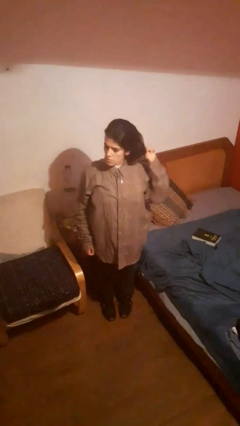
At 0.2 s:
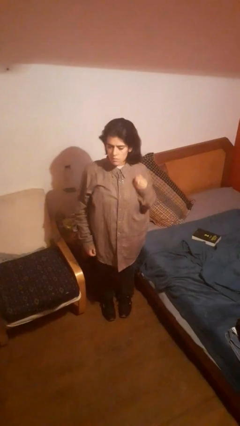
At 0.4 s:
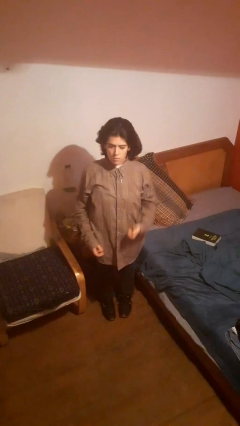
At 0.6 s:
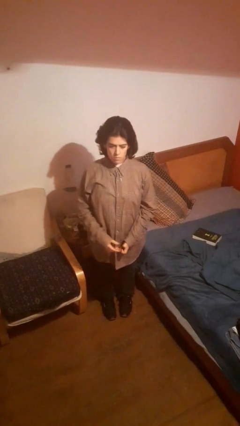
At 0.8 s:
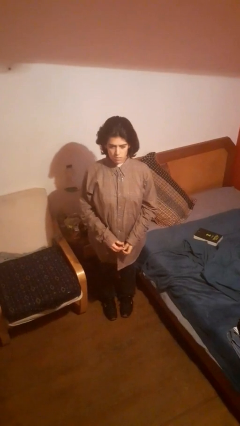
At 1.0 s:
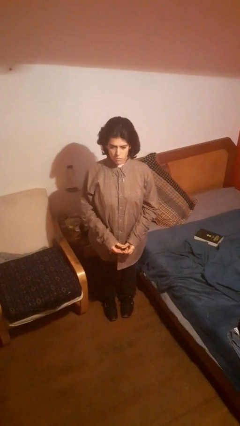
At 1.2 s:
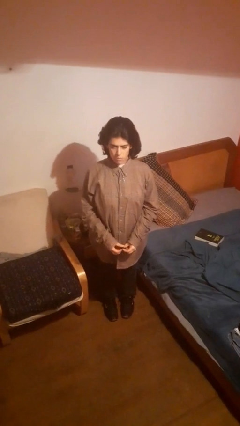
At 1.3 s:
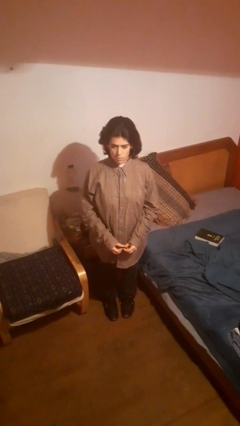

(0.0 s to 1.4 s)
person takes off hairtie

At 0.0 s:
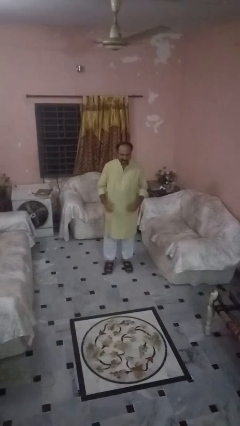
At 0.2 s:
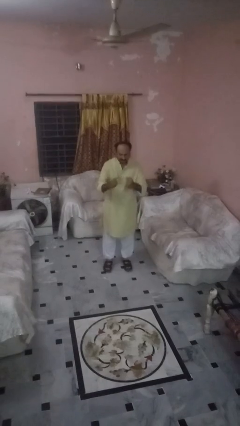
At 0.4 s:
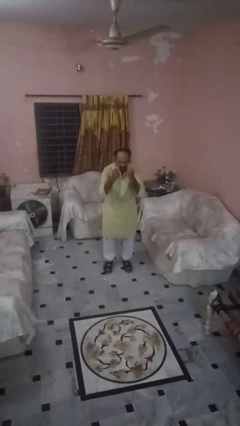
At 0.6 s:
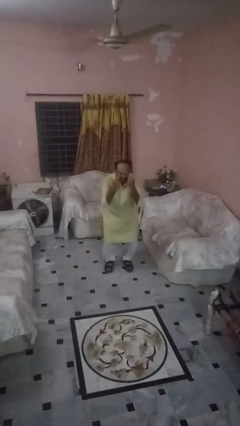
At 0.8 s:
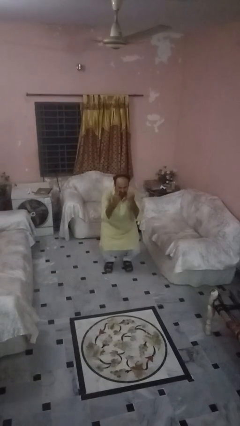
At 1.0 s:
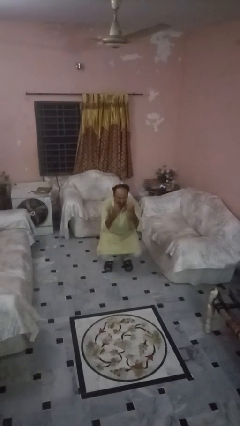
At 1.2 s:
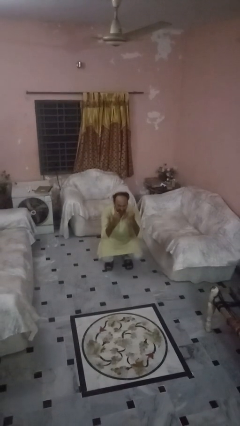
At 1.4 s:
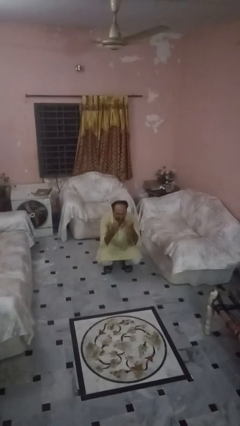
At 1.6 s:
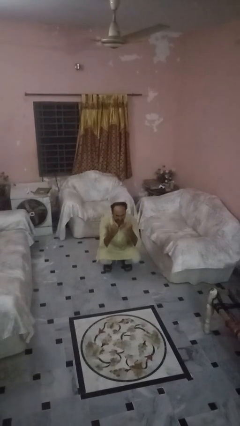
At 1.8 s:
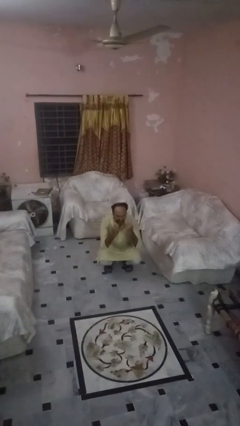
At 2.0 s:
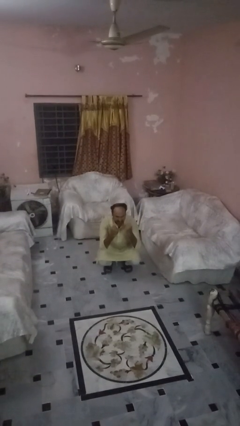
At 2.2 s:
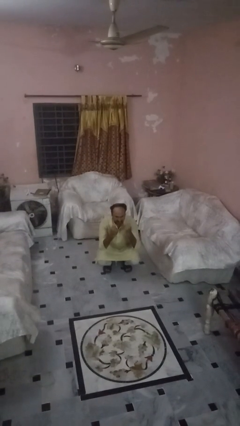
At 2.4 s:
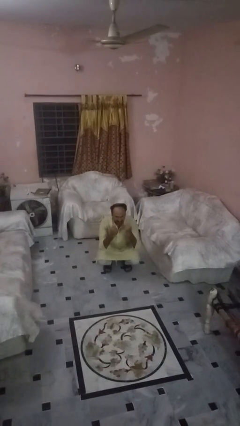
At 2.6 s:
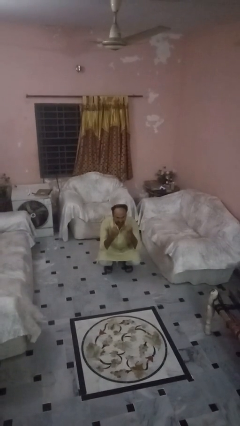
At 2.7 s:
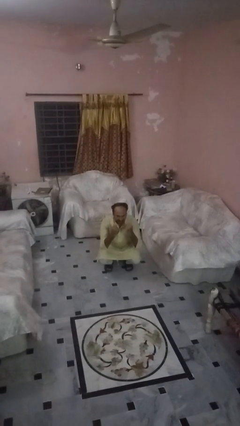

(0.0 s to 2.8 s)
person squats

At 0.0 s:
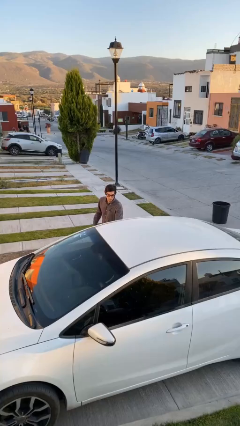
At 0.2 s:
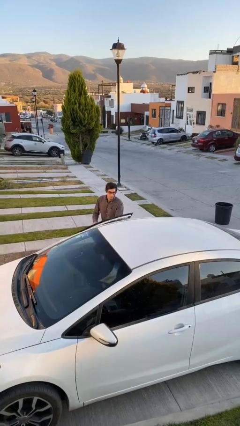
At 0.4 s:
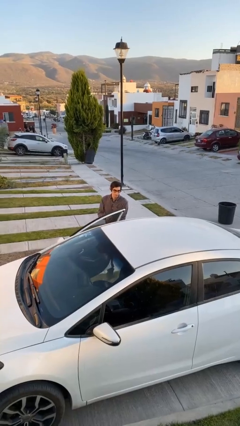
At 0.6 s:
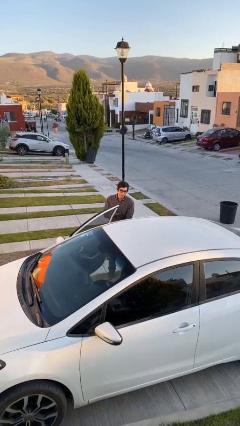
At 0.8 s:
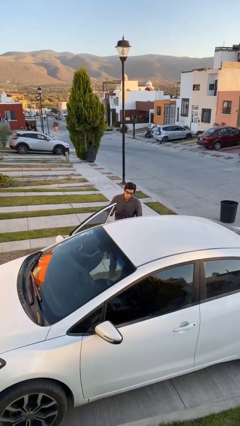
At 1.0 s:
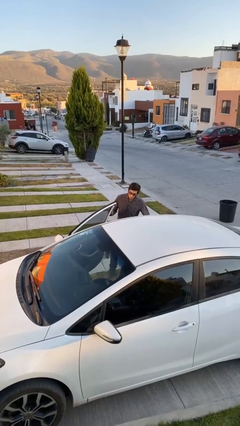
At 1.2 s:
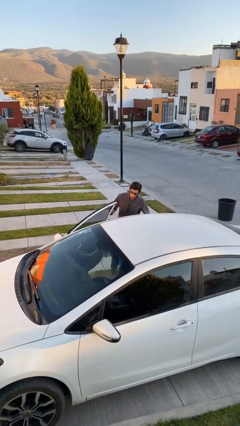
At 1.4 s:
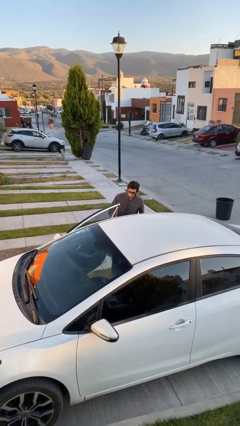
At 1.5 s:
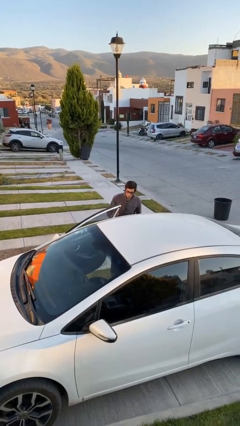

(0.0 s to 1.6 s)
person opens car door

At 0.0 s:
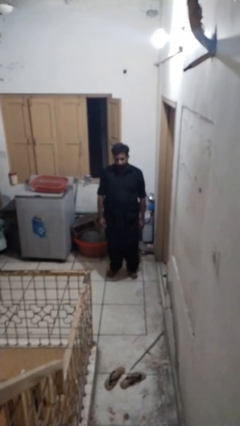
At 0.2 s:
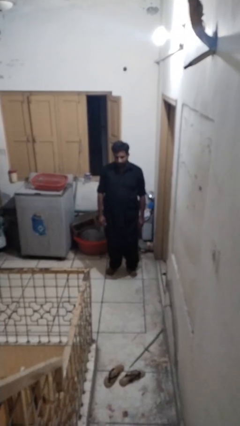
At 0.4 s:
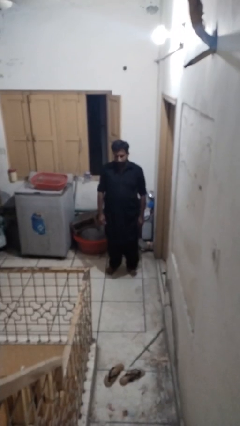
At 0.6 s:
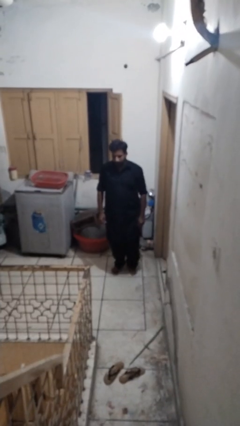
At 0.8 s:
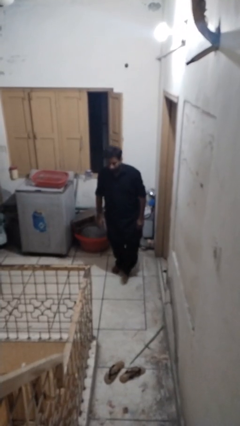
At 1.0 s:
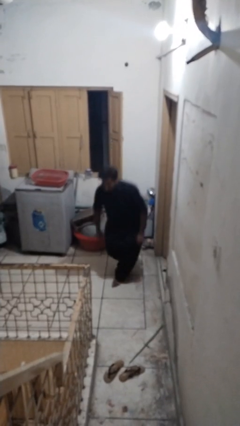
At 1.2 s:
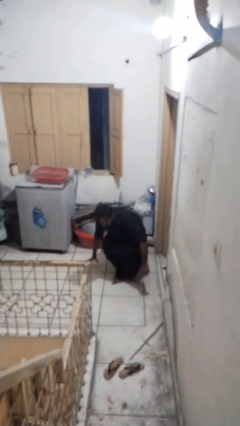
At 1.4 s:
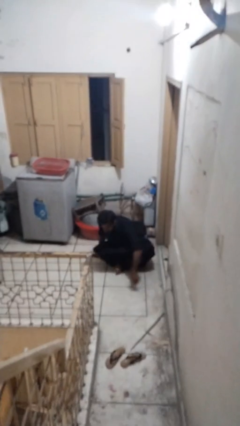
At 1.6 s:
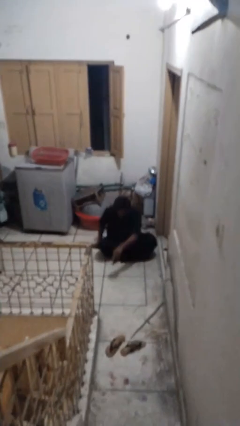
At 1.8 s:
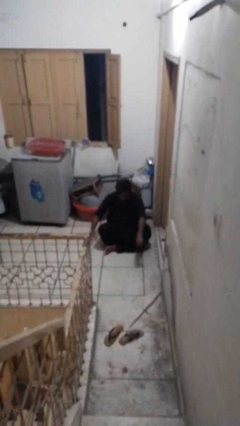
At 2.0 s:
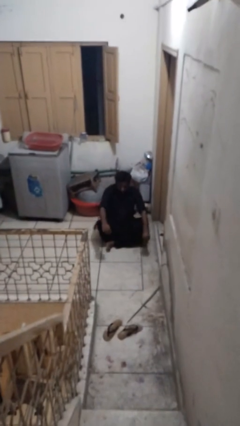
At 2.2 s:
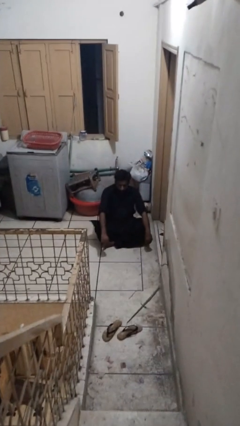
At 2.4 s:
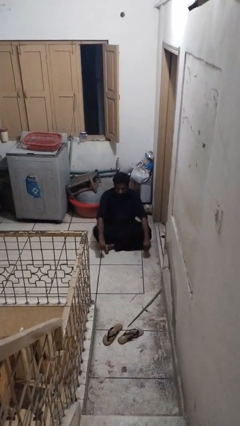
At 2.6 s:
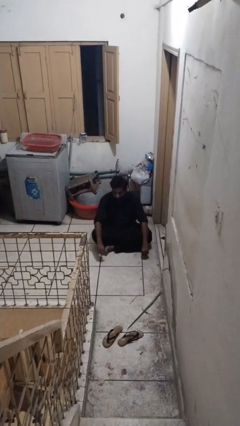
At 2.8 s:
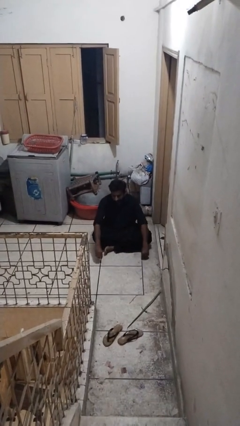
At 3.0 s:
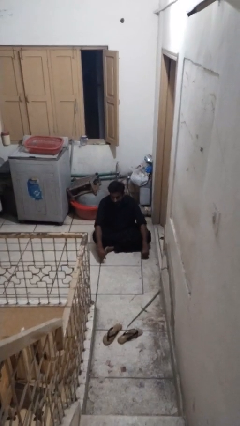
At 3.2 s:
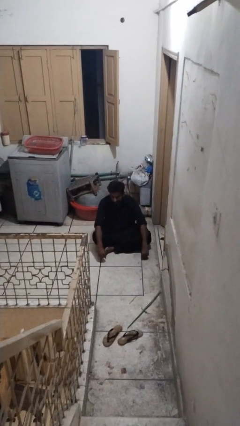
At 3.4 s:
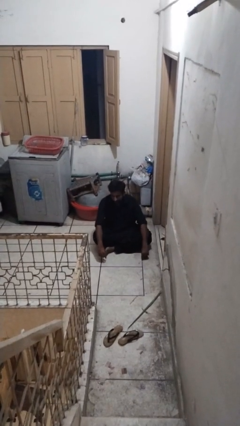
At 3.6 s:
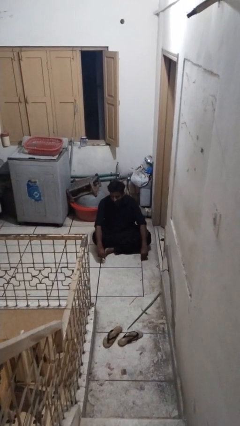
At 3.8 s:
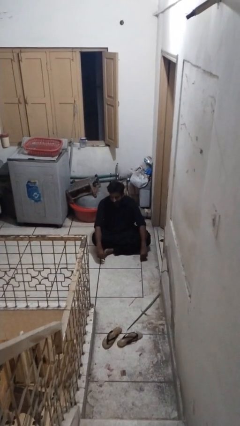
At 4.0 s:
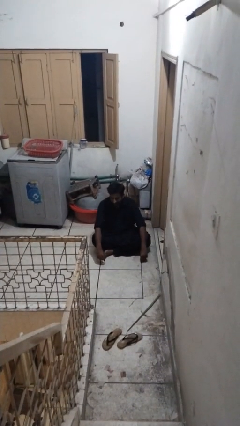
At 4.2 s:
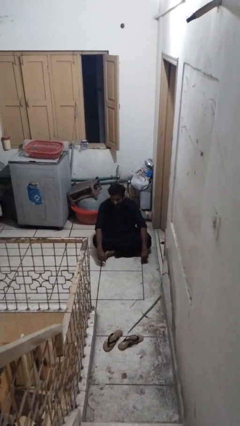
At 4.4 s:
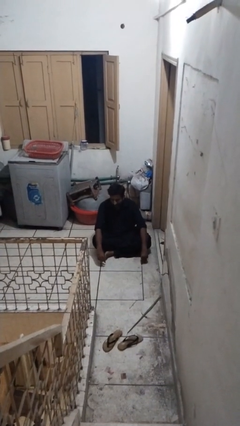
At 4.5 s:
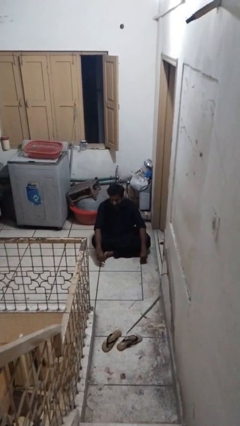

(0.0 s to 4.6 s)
person sits crisscross

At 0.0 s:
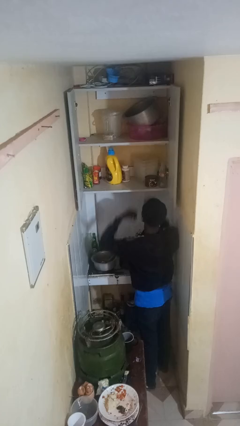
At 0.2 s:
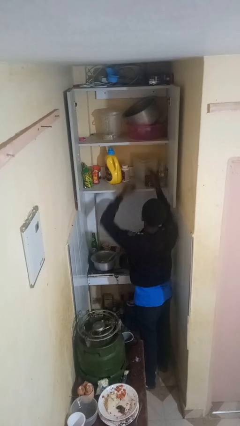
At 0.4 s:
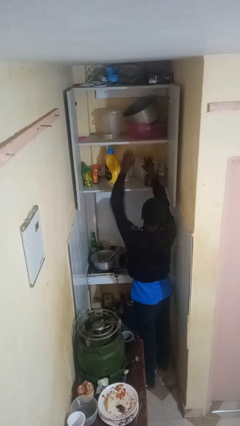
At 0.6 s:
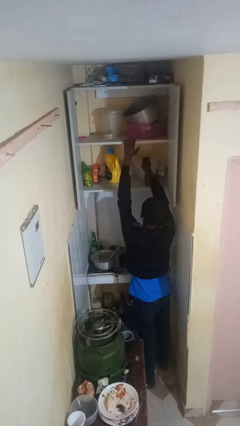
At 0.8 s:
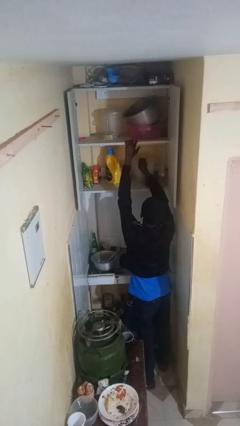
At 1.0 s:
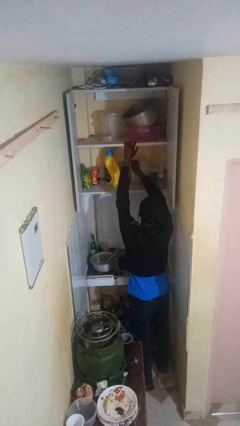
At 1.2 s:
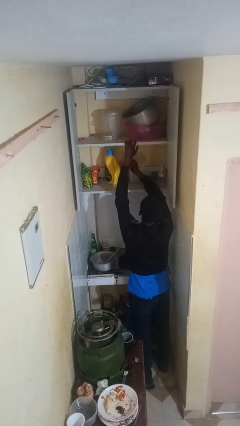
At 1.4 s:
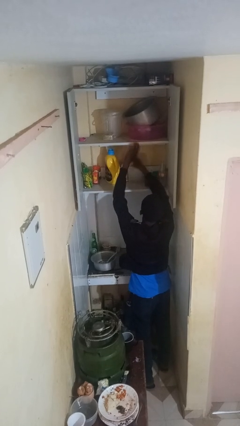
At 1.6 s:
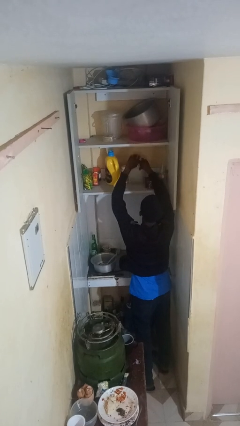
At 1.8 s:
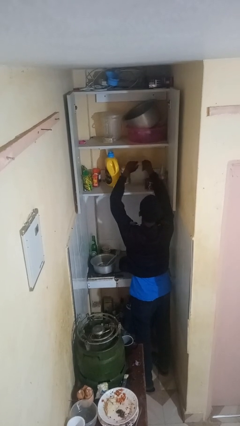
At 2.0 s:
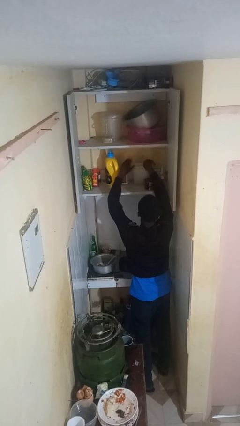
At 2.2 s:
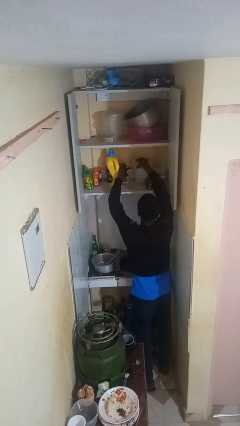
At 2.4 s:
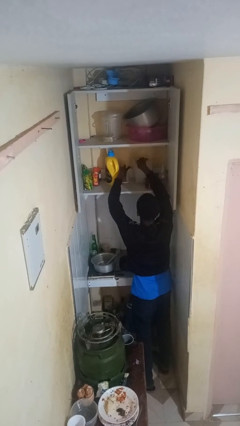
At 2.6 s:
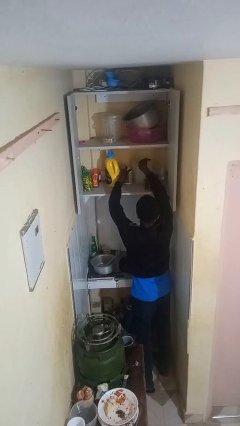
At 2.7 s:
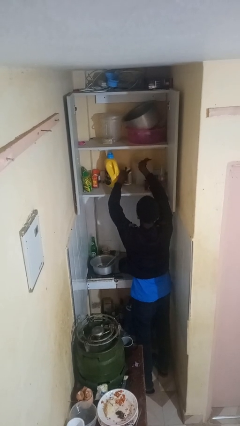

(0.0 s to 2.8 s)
person searches in kitchen drawer

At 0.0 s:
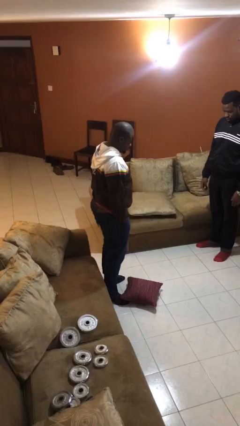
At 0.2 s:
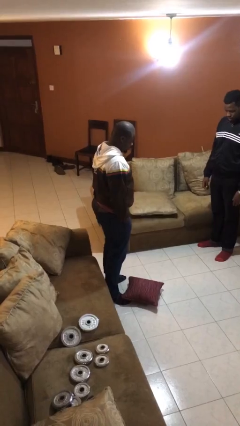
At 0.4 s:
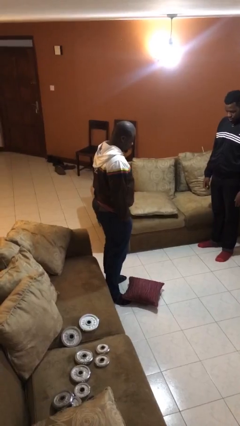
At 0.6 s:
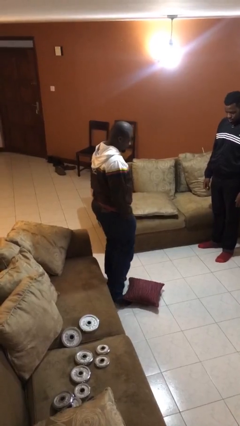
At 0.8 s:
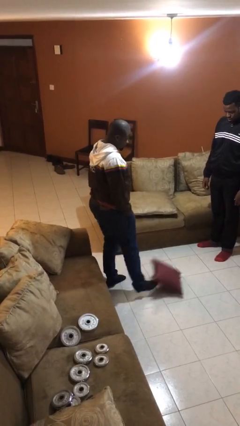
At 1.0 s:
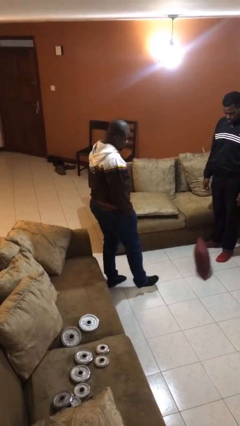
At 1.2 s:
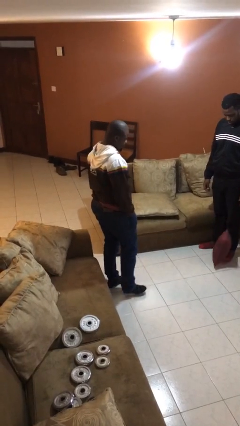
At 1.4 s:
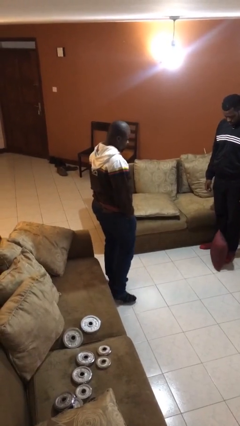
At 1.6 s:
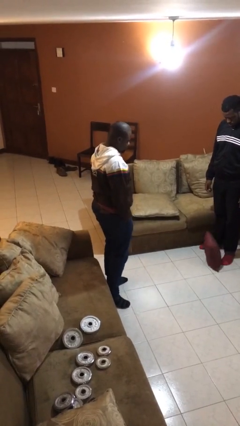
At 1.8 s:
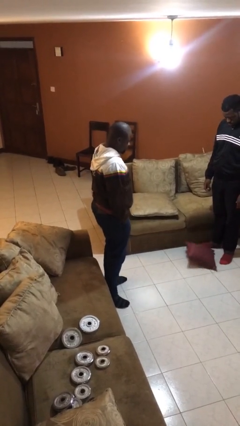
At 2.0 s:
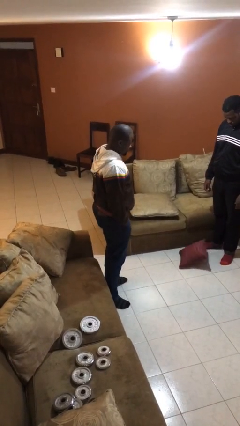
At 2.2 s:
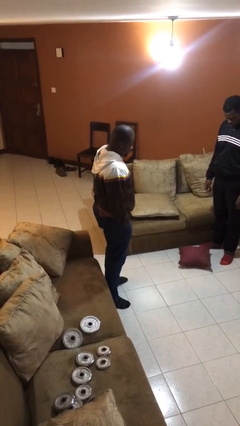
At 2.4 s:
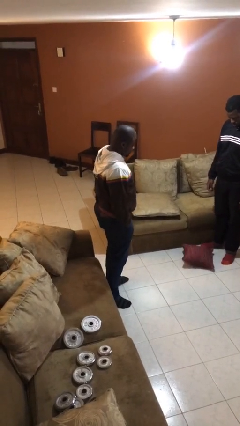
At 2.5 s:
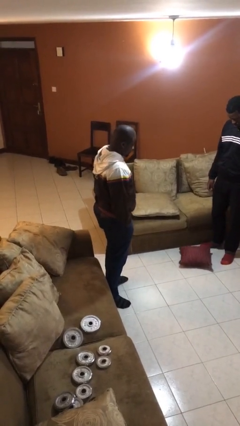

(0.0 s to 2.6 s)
person kicks object to person

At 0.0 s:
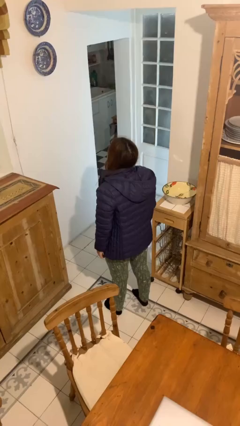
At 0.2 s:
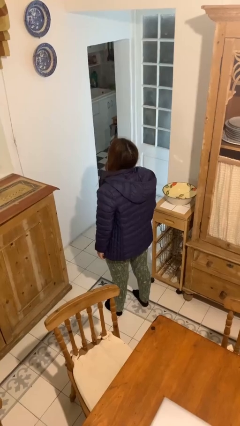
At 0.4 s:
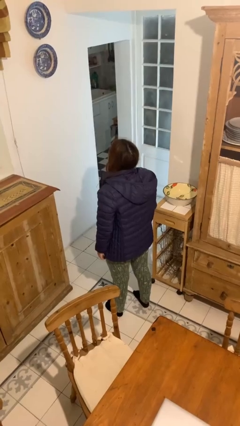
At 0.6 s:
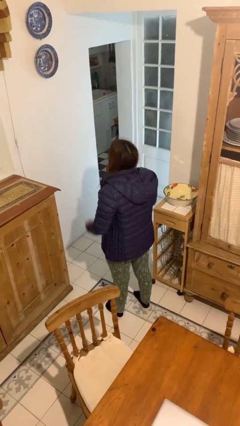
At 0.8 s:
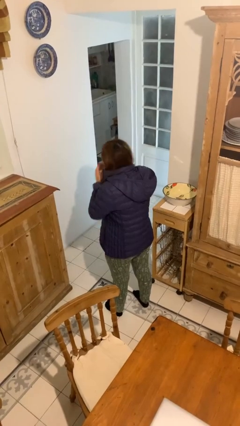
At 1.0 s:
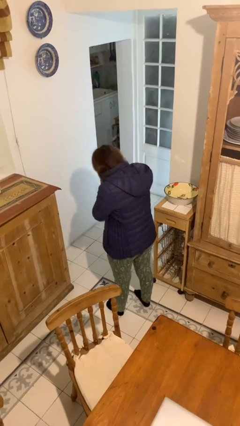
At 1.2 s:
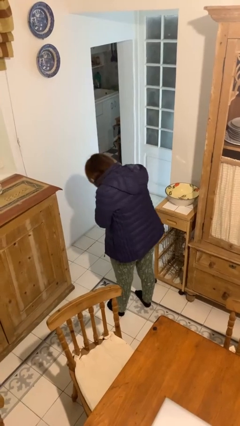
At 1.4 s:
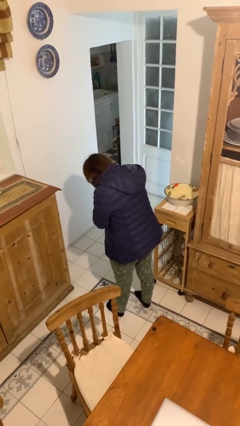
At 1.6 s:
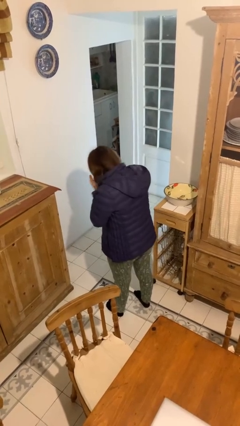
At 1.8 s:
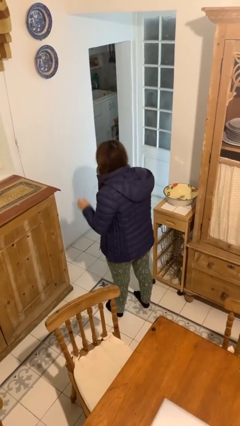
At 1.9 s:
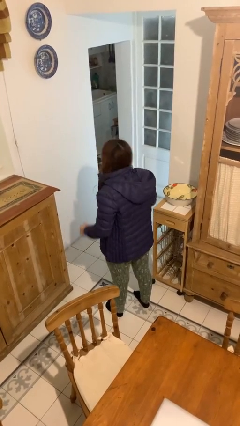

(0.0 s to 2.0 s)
person sneezes into hand
